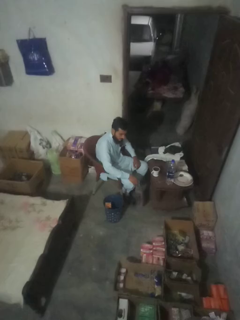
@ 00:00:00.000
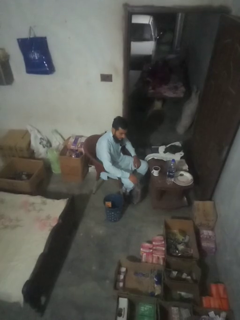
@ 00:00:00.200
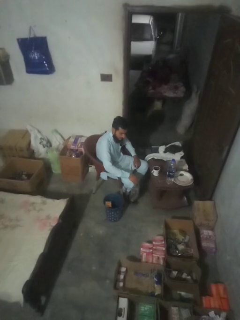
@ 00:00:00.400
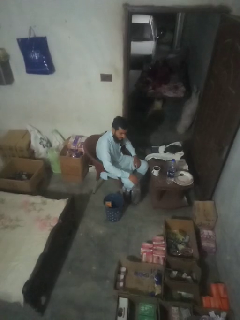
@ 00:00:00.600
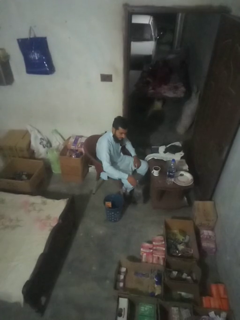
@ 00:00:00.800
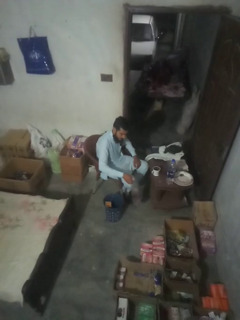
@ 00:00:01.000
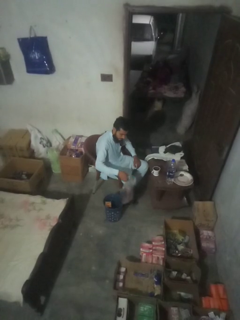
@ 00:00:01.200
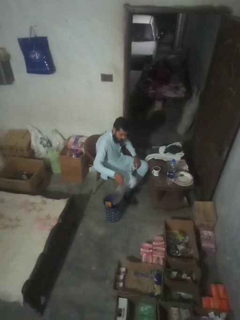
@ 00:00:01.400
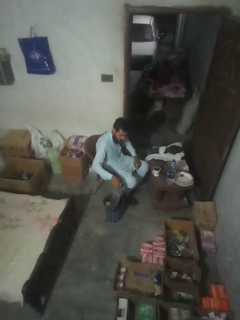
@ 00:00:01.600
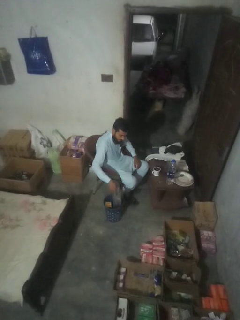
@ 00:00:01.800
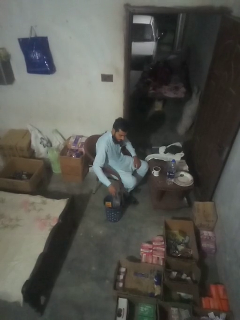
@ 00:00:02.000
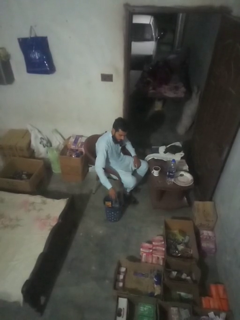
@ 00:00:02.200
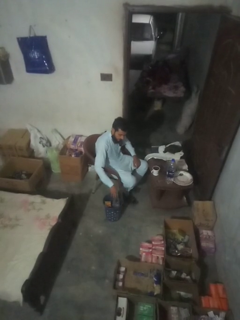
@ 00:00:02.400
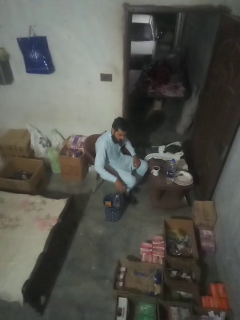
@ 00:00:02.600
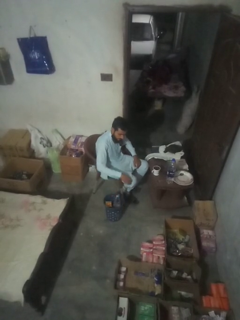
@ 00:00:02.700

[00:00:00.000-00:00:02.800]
person removes trashbag from trashcan

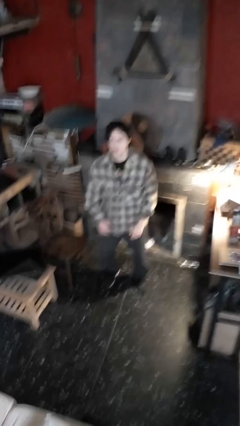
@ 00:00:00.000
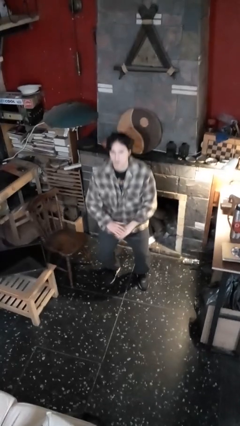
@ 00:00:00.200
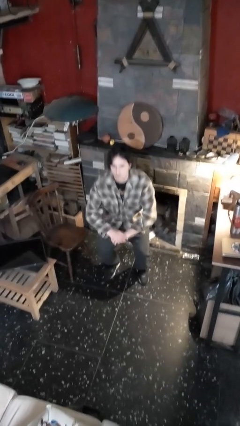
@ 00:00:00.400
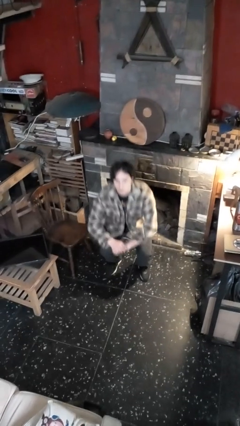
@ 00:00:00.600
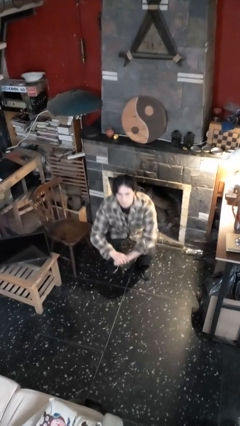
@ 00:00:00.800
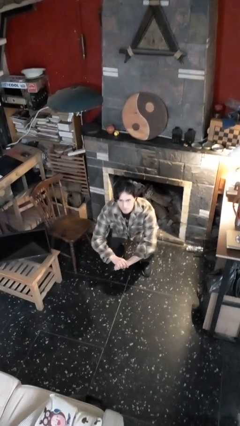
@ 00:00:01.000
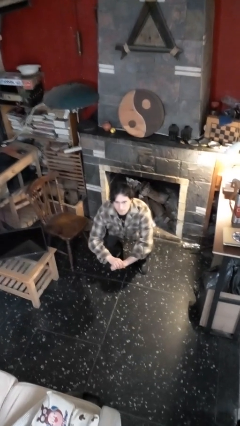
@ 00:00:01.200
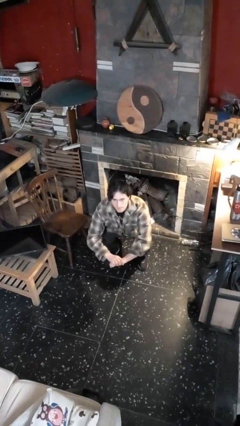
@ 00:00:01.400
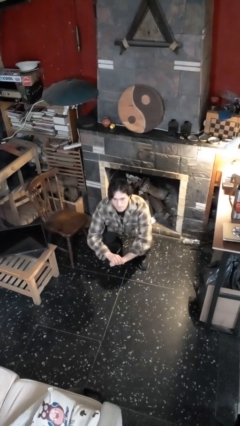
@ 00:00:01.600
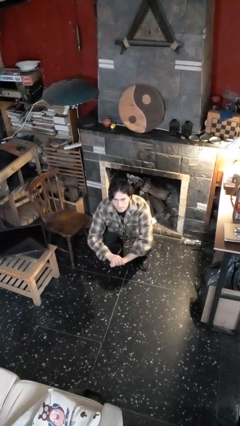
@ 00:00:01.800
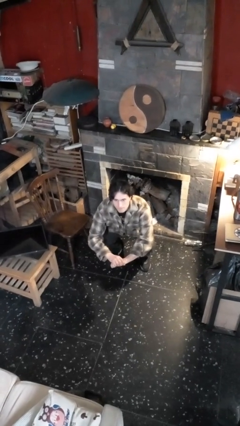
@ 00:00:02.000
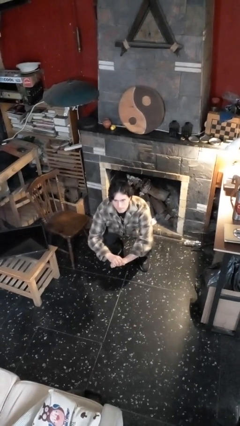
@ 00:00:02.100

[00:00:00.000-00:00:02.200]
person squats

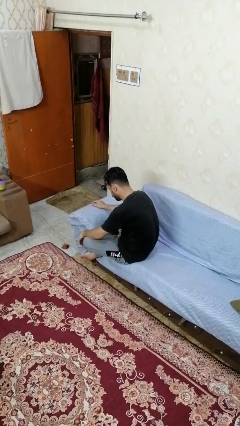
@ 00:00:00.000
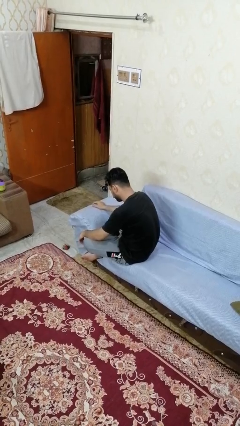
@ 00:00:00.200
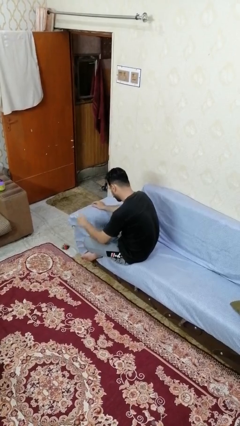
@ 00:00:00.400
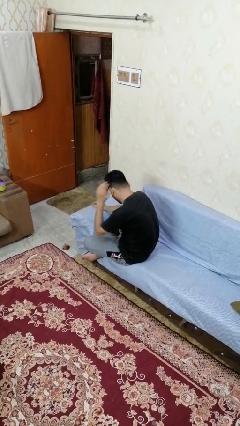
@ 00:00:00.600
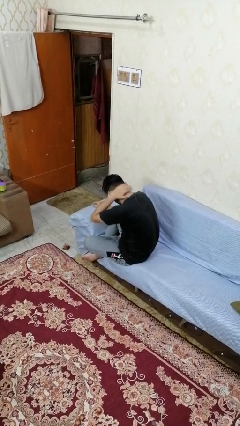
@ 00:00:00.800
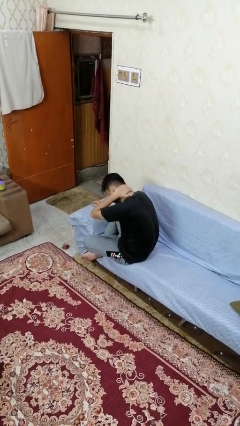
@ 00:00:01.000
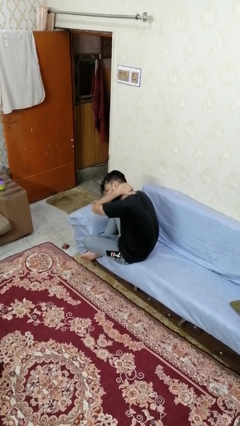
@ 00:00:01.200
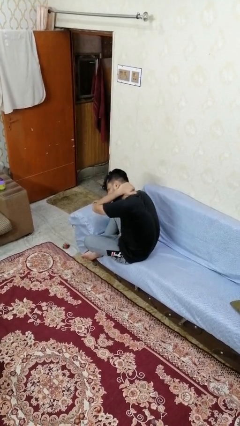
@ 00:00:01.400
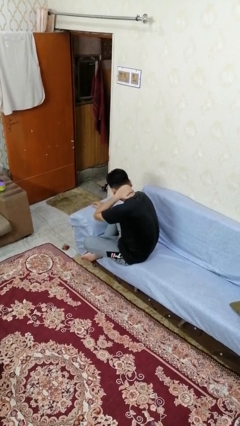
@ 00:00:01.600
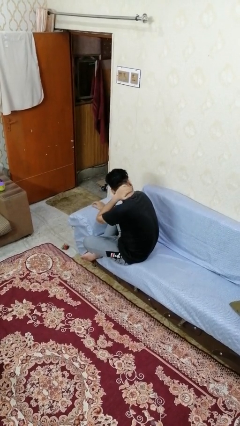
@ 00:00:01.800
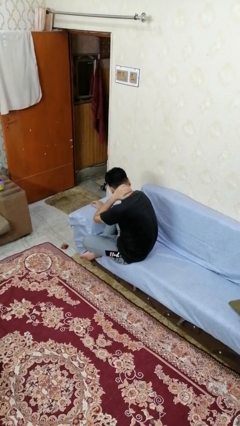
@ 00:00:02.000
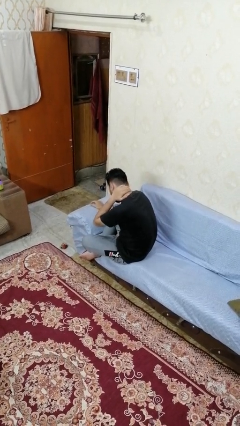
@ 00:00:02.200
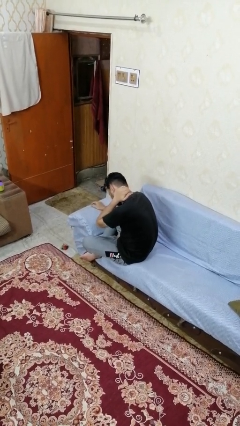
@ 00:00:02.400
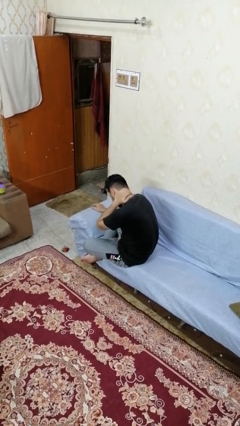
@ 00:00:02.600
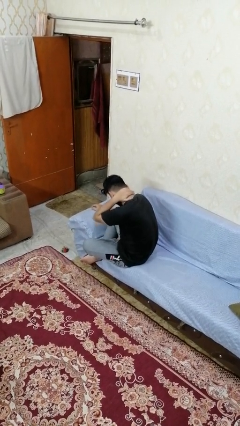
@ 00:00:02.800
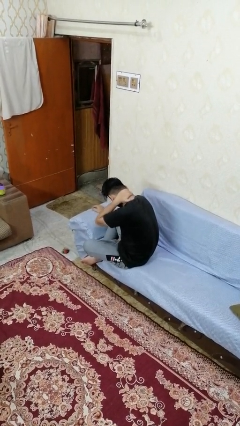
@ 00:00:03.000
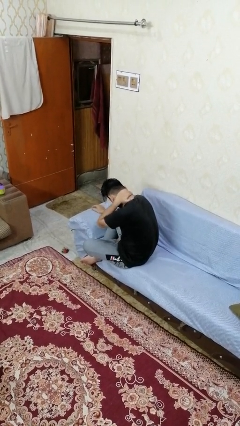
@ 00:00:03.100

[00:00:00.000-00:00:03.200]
person rubs neck

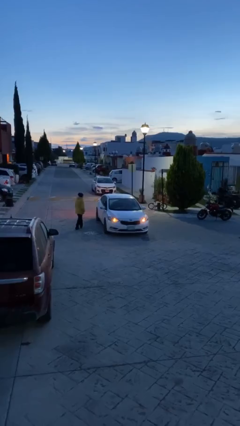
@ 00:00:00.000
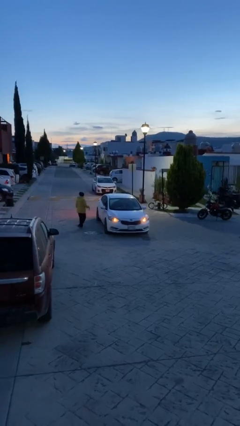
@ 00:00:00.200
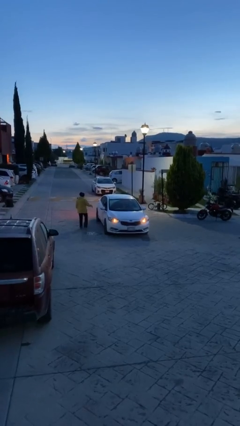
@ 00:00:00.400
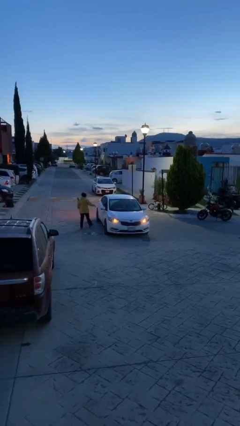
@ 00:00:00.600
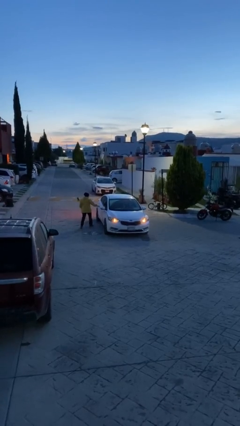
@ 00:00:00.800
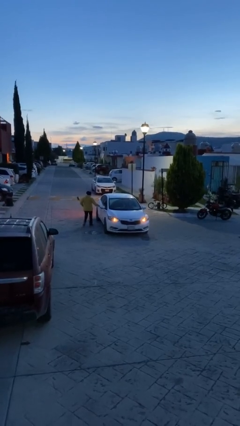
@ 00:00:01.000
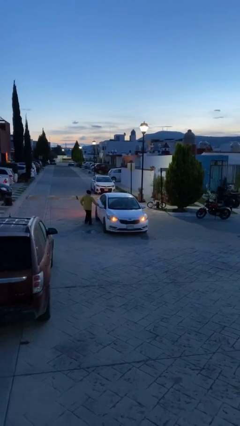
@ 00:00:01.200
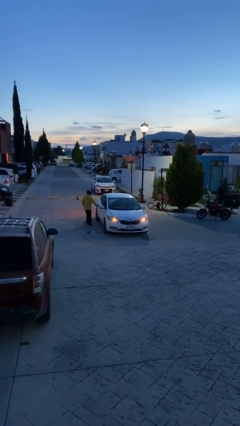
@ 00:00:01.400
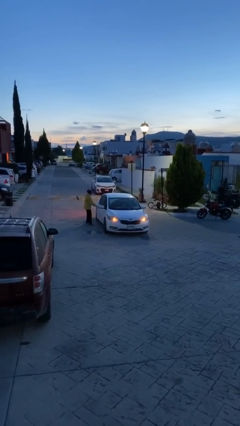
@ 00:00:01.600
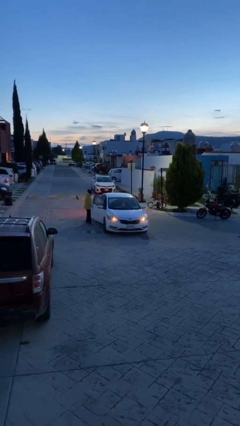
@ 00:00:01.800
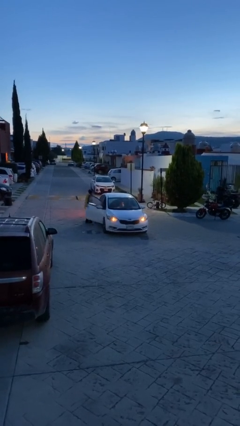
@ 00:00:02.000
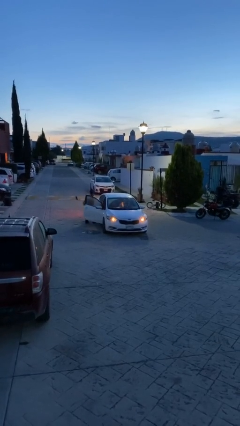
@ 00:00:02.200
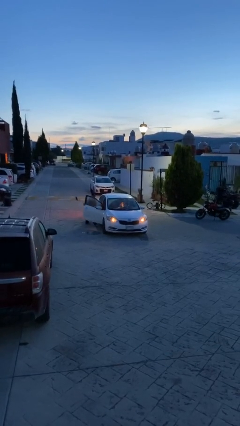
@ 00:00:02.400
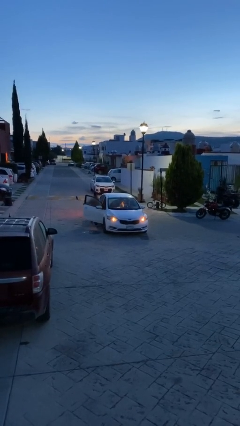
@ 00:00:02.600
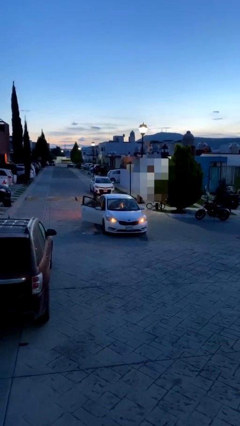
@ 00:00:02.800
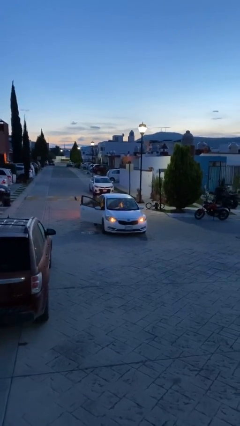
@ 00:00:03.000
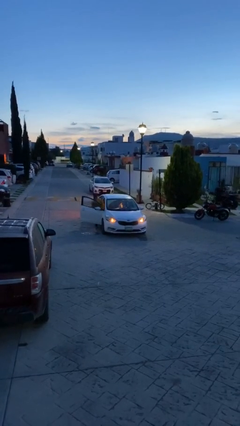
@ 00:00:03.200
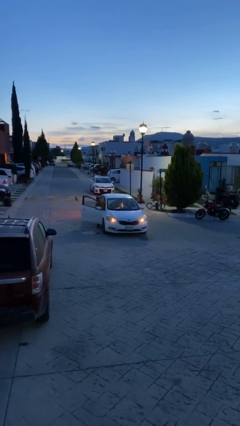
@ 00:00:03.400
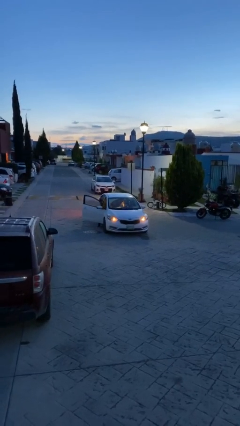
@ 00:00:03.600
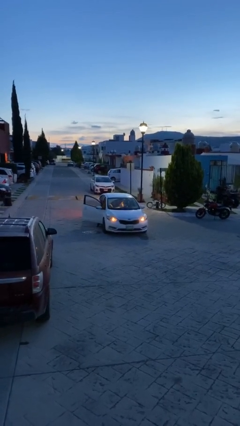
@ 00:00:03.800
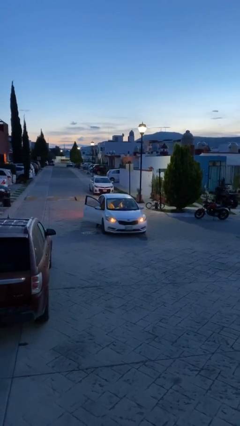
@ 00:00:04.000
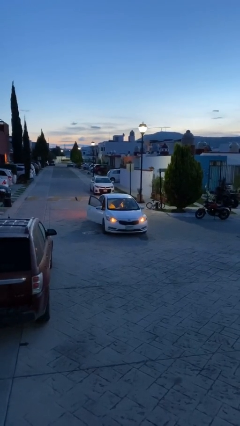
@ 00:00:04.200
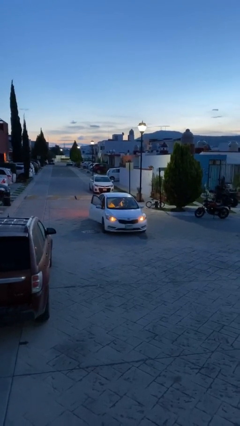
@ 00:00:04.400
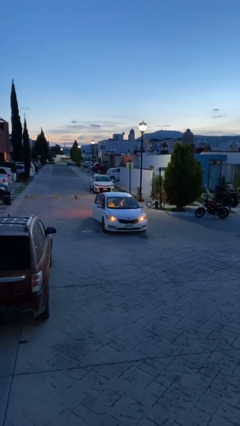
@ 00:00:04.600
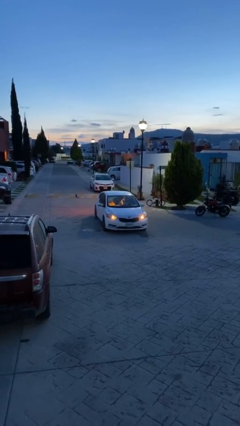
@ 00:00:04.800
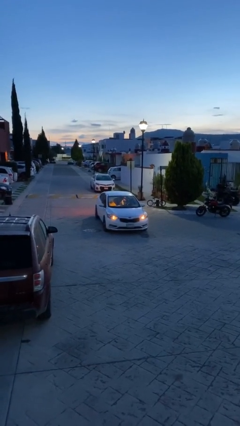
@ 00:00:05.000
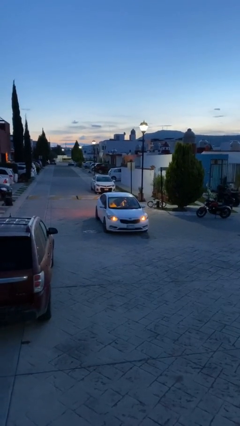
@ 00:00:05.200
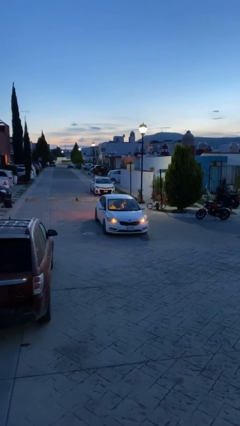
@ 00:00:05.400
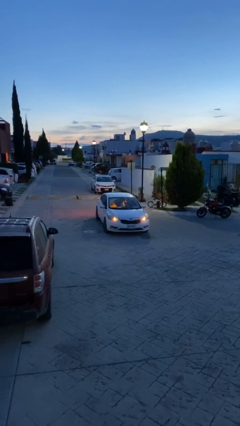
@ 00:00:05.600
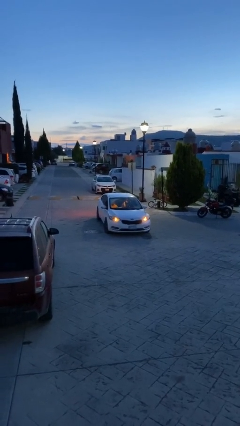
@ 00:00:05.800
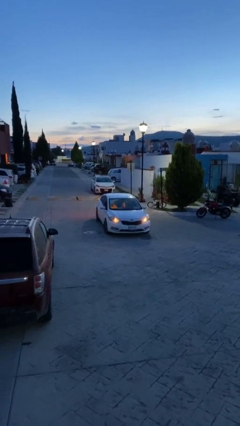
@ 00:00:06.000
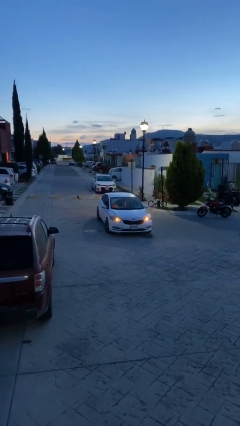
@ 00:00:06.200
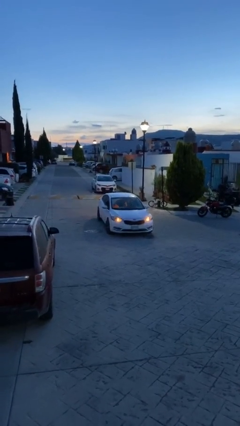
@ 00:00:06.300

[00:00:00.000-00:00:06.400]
car picks up person

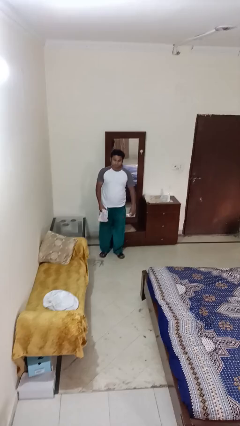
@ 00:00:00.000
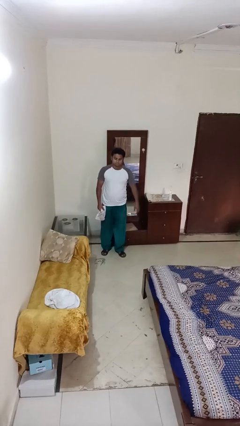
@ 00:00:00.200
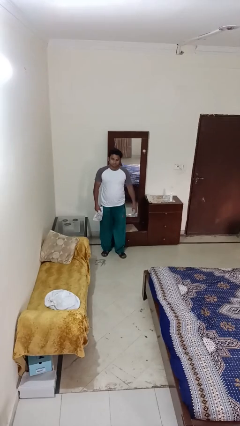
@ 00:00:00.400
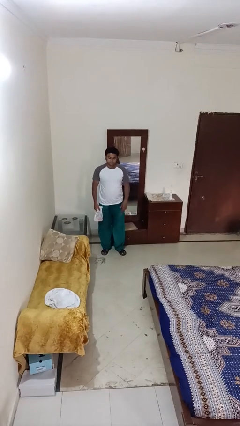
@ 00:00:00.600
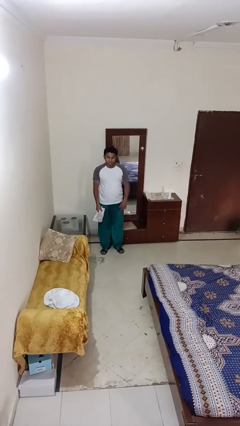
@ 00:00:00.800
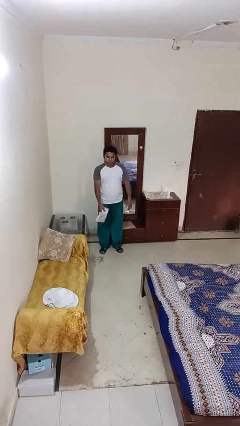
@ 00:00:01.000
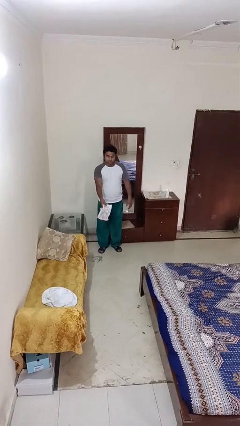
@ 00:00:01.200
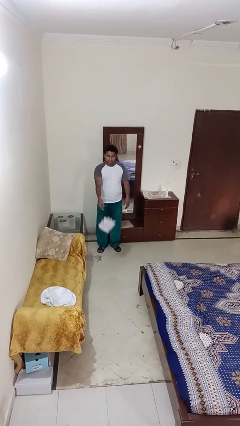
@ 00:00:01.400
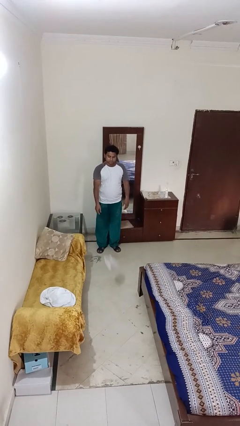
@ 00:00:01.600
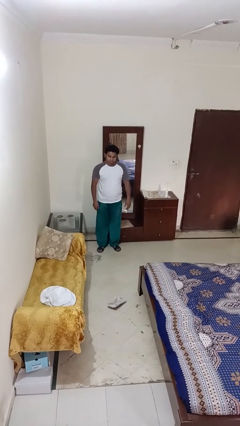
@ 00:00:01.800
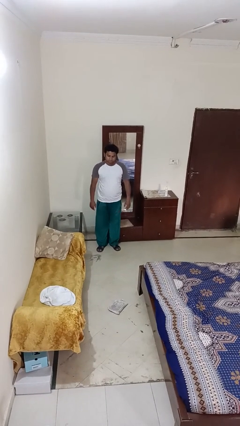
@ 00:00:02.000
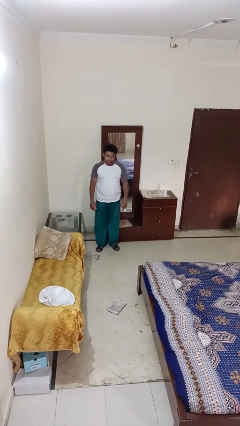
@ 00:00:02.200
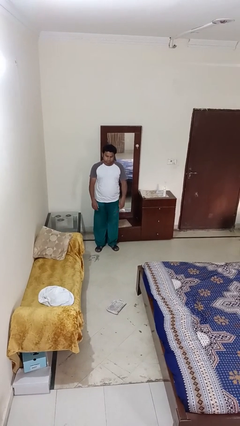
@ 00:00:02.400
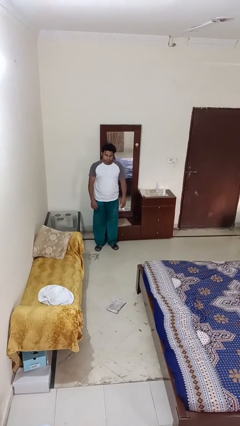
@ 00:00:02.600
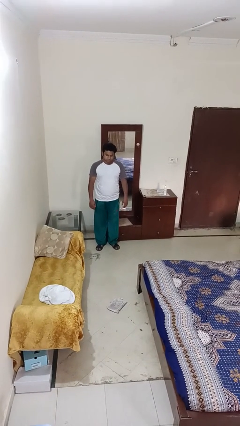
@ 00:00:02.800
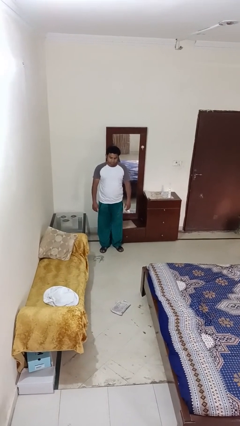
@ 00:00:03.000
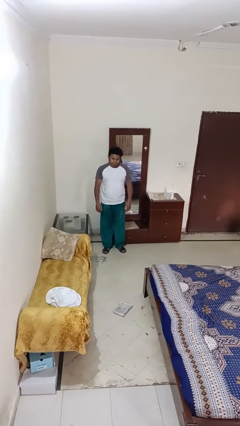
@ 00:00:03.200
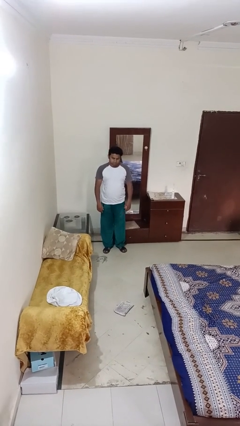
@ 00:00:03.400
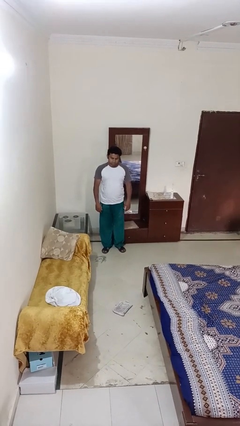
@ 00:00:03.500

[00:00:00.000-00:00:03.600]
person throws object to ground
